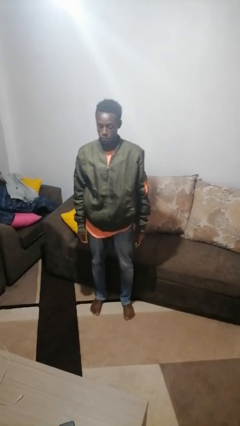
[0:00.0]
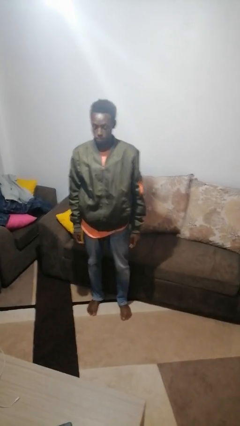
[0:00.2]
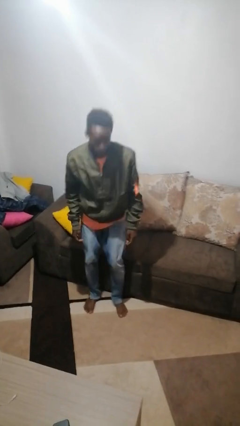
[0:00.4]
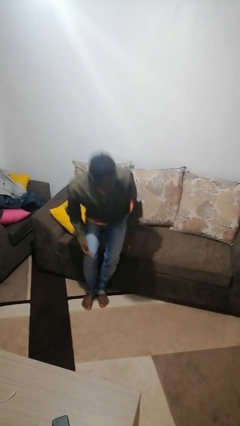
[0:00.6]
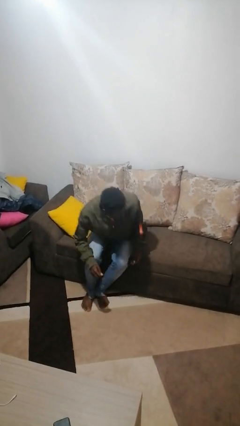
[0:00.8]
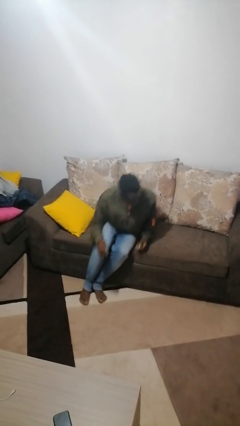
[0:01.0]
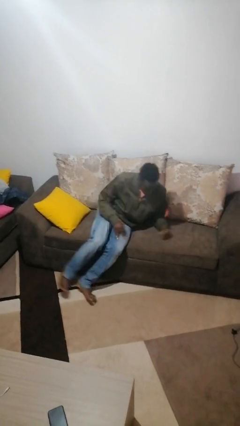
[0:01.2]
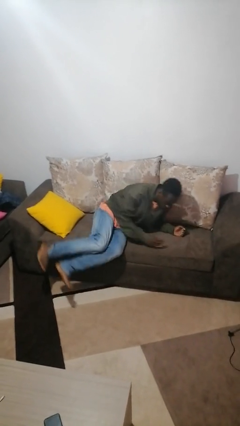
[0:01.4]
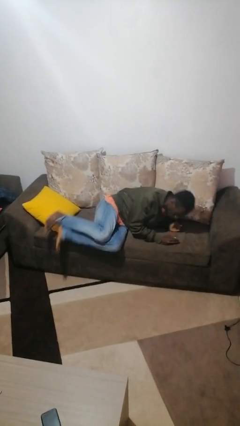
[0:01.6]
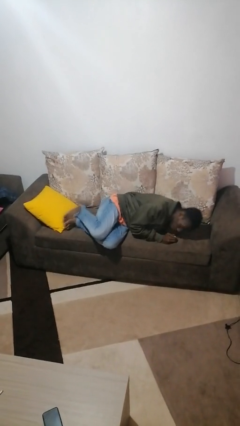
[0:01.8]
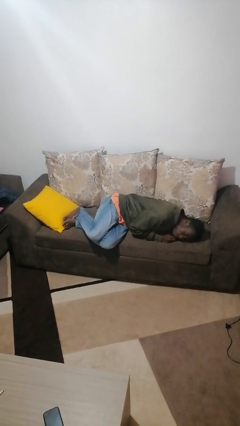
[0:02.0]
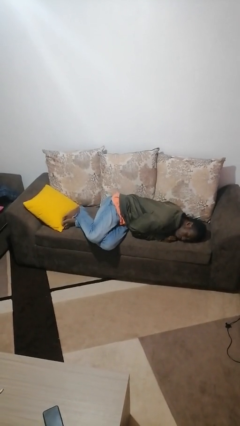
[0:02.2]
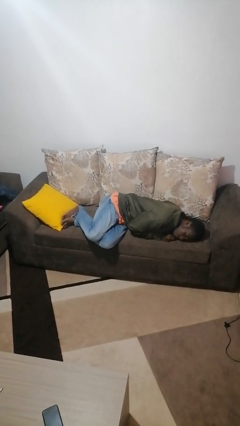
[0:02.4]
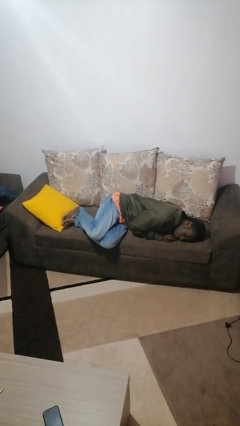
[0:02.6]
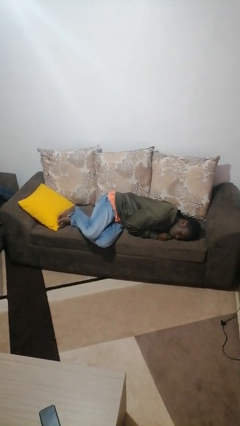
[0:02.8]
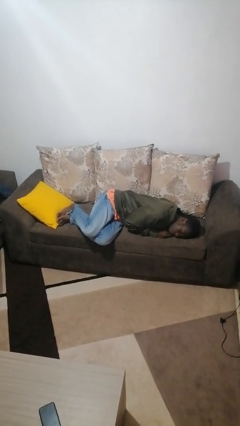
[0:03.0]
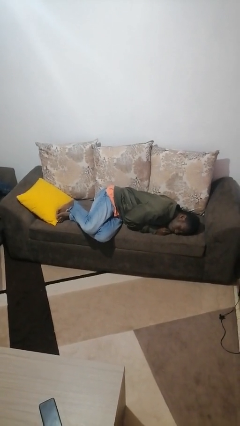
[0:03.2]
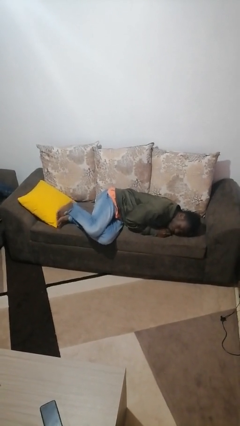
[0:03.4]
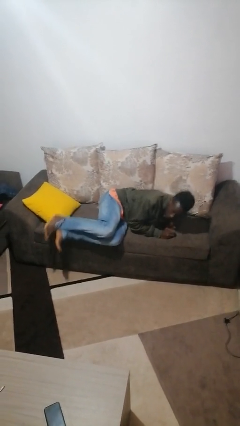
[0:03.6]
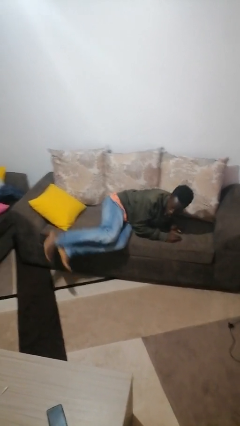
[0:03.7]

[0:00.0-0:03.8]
person lies down on couch

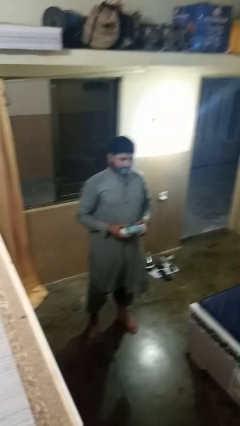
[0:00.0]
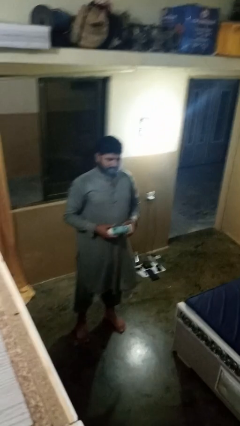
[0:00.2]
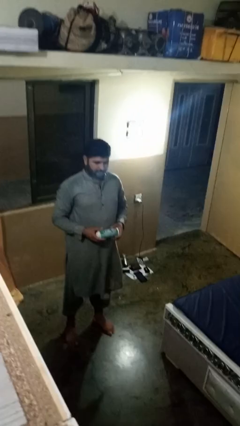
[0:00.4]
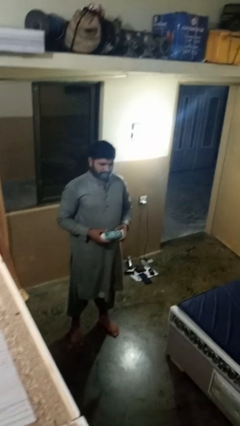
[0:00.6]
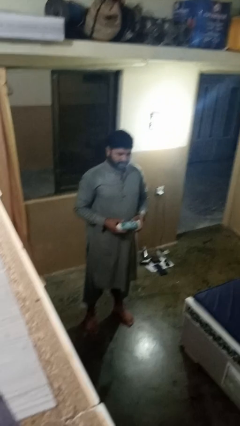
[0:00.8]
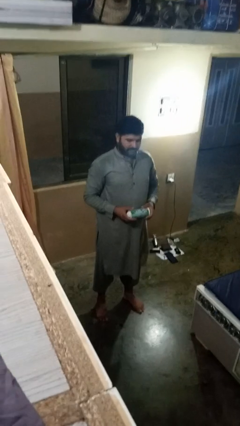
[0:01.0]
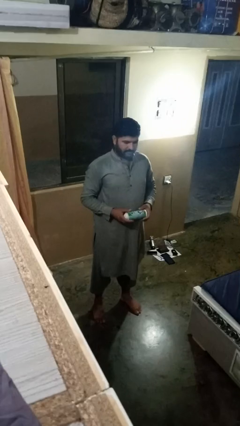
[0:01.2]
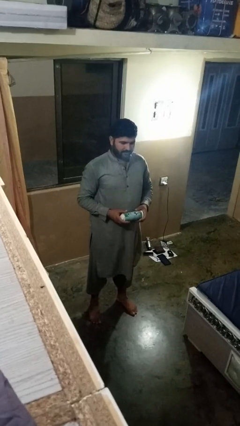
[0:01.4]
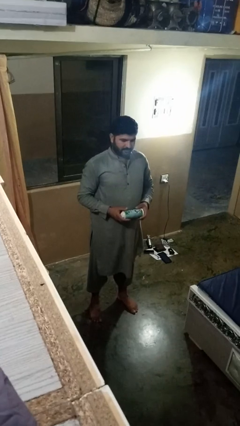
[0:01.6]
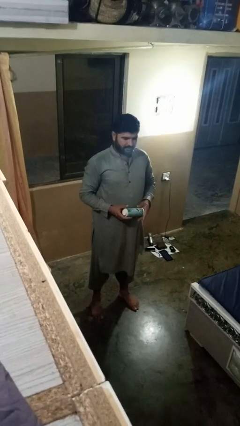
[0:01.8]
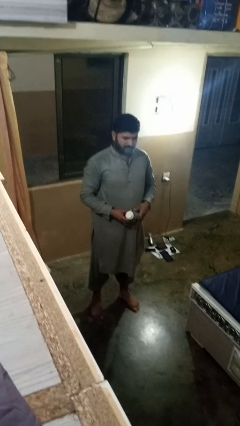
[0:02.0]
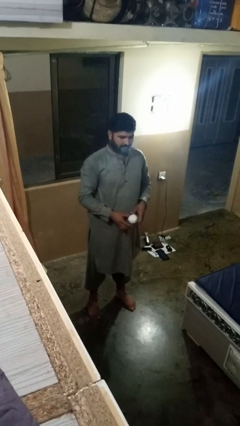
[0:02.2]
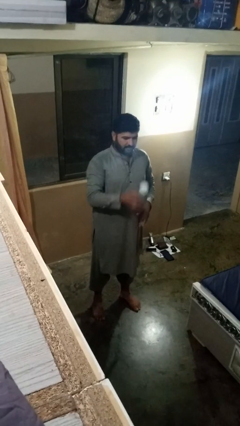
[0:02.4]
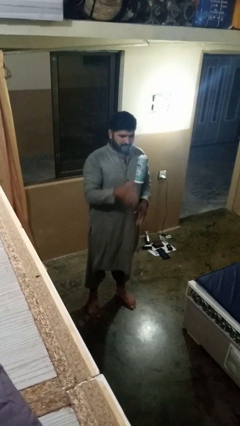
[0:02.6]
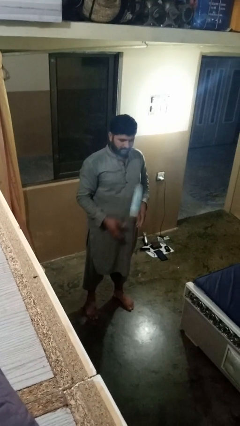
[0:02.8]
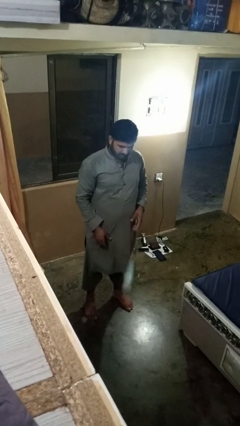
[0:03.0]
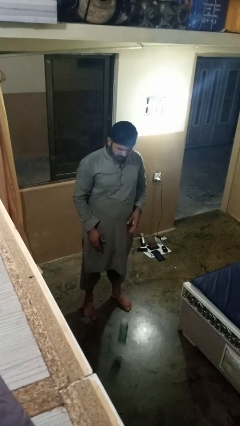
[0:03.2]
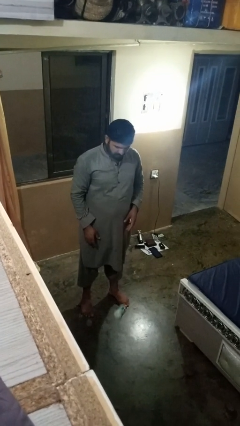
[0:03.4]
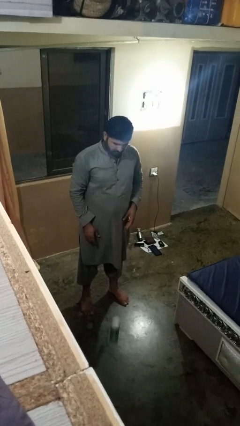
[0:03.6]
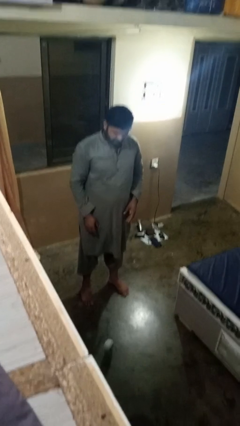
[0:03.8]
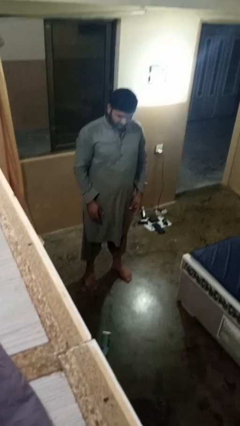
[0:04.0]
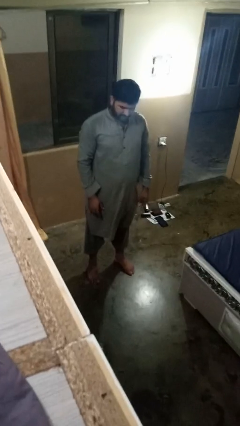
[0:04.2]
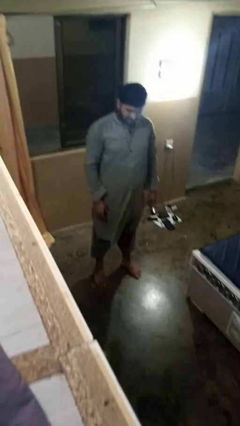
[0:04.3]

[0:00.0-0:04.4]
person throws object into air

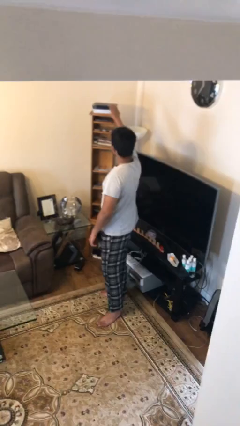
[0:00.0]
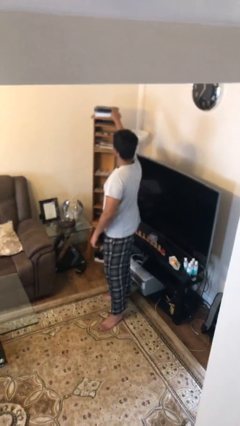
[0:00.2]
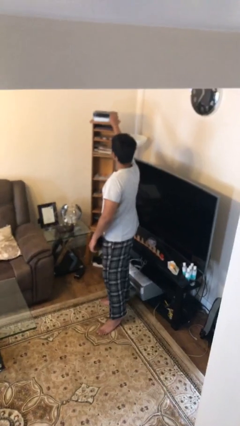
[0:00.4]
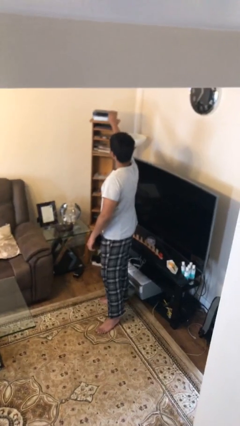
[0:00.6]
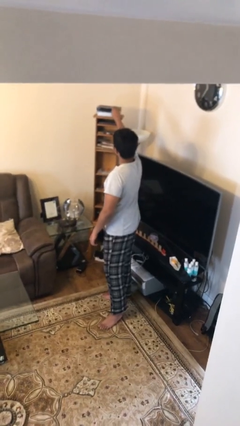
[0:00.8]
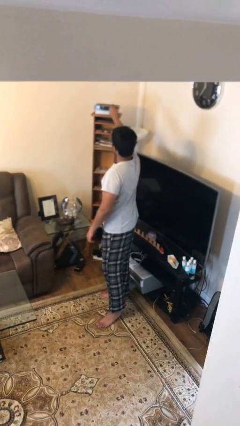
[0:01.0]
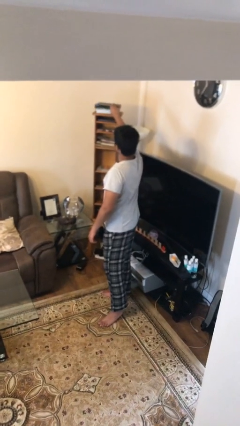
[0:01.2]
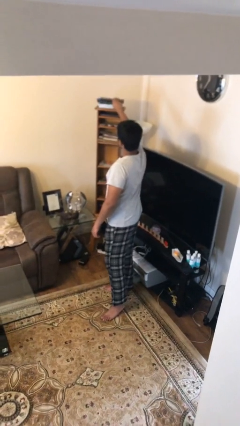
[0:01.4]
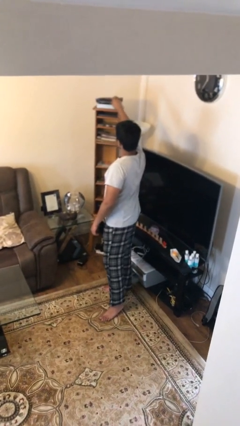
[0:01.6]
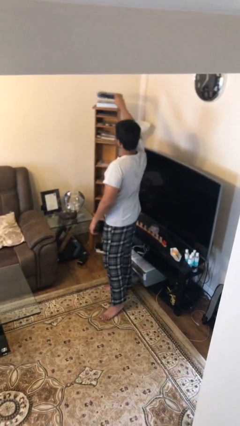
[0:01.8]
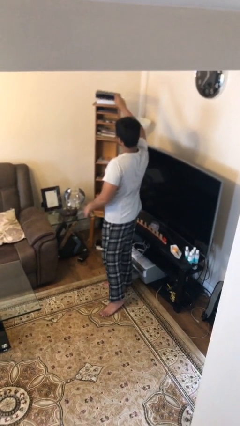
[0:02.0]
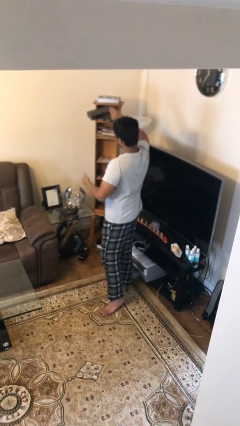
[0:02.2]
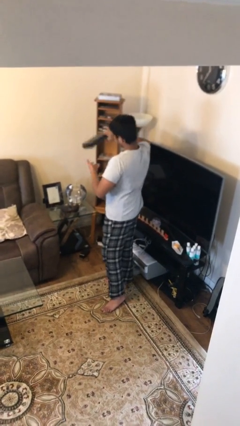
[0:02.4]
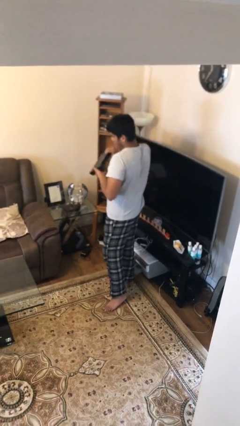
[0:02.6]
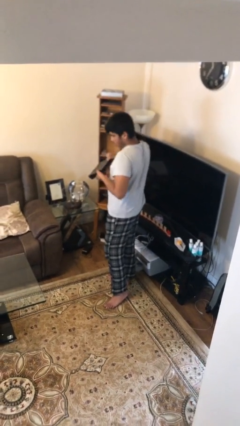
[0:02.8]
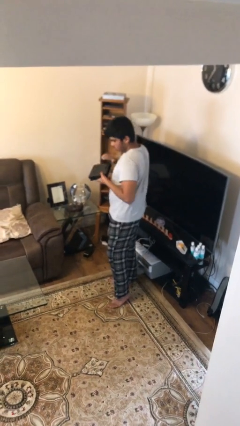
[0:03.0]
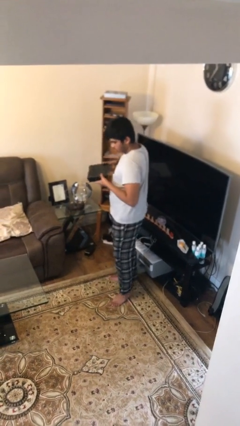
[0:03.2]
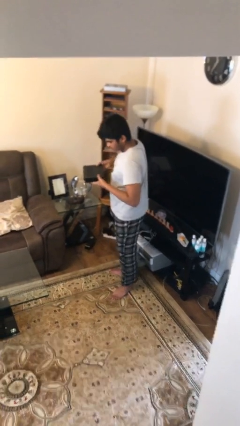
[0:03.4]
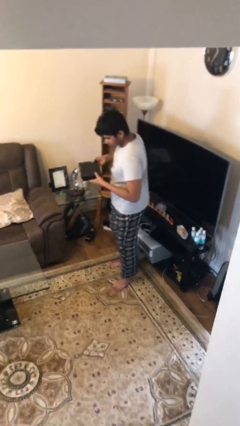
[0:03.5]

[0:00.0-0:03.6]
person picks up object from shelf

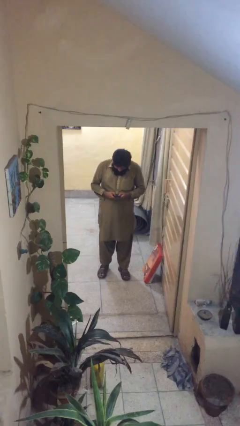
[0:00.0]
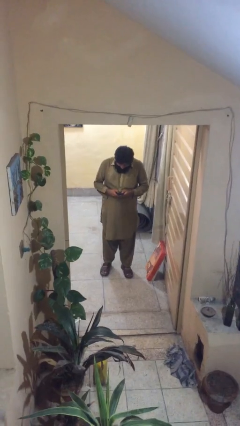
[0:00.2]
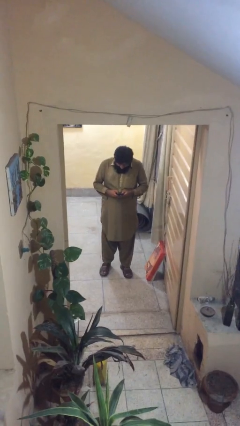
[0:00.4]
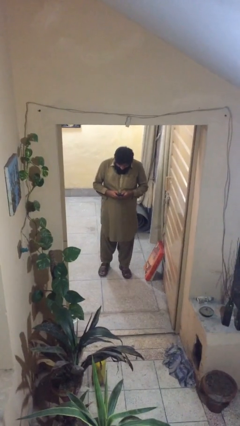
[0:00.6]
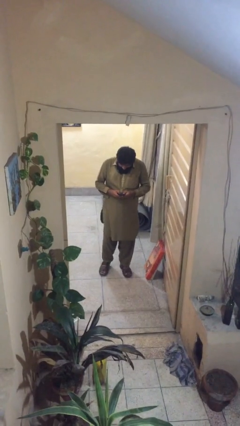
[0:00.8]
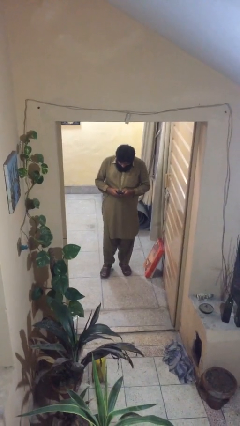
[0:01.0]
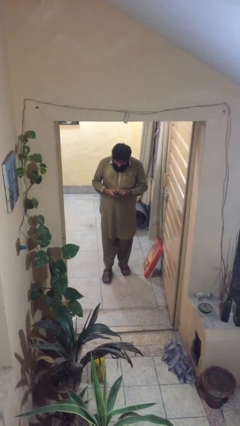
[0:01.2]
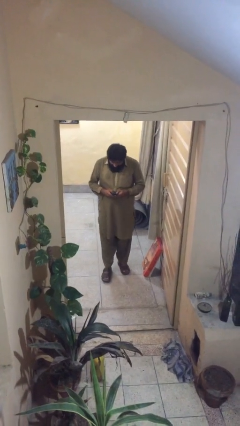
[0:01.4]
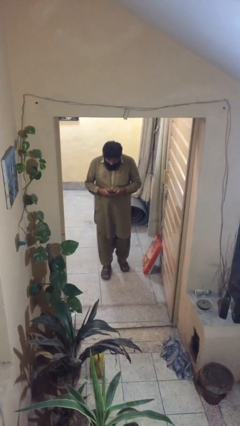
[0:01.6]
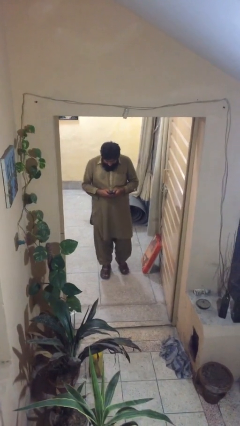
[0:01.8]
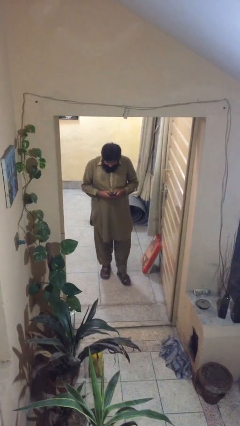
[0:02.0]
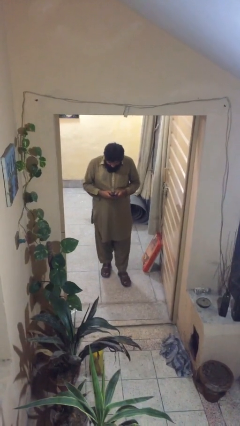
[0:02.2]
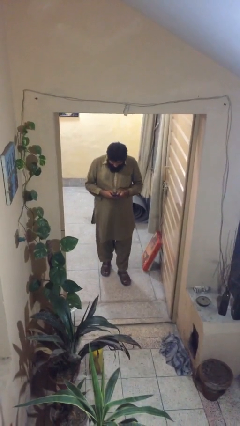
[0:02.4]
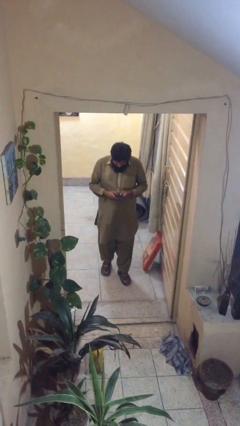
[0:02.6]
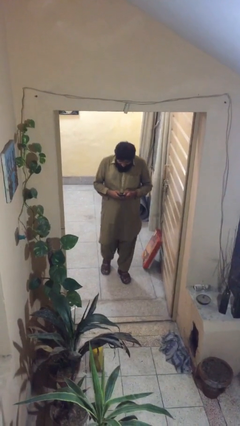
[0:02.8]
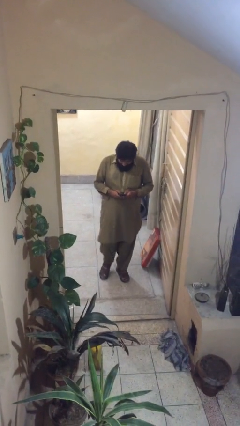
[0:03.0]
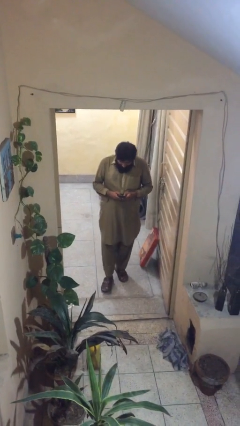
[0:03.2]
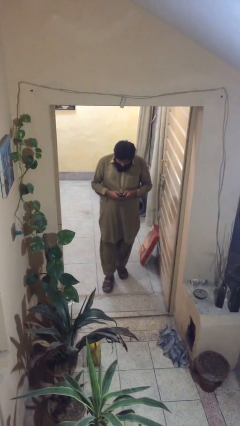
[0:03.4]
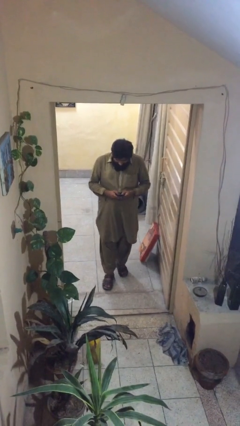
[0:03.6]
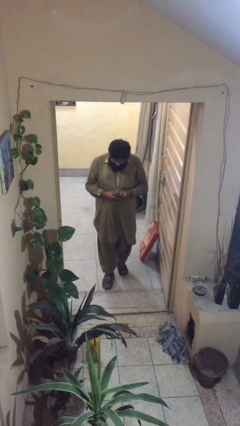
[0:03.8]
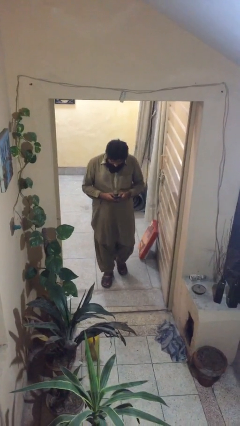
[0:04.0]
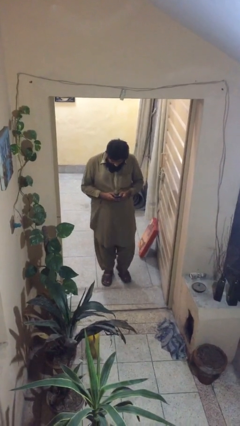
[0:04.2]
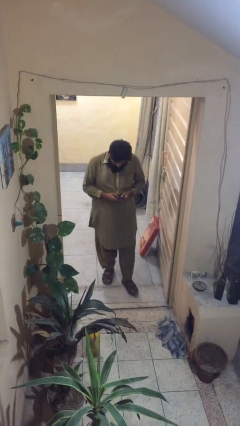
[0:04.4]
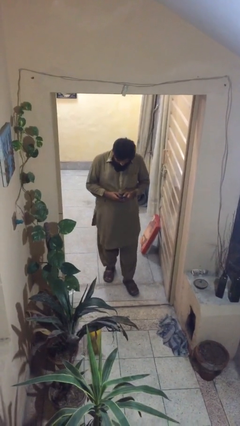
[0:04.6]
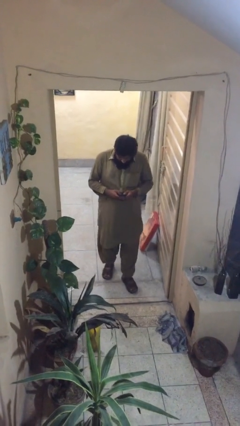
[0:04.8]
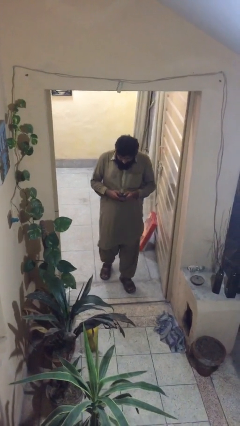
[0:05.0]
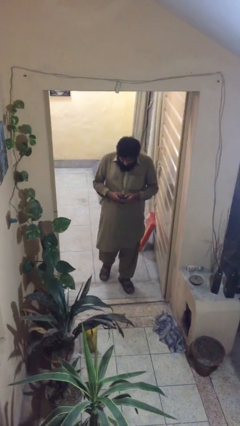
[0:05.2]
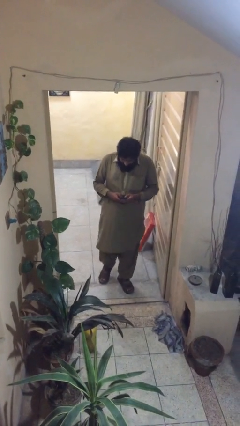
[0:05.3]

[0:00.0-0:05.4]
person texts on phone

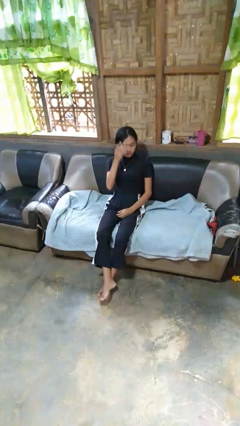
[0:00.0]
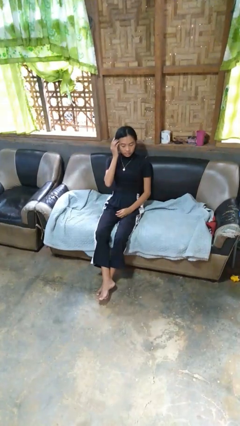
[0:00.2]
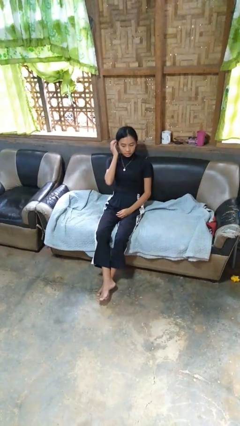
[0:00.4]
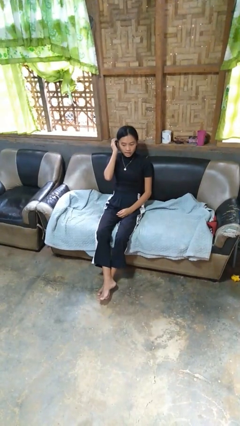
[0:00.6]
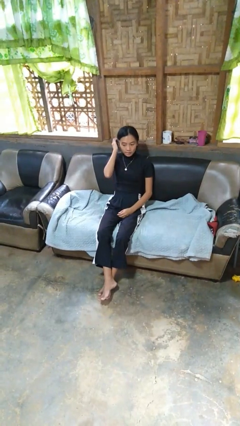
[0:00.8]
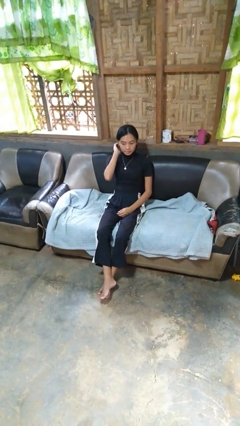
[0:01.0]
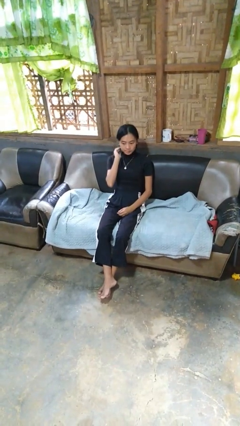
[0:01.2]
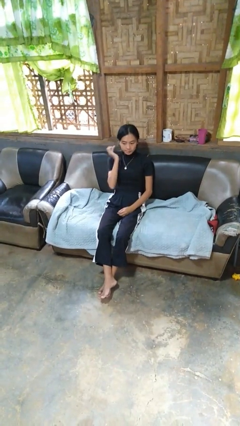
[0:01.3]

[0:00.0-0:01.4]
person strokes hair
